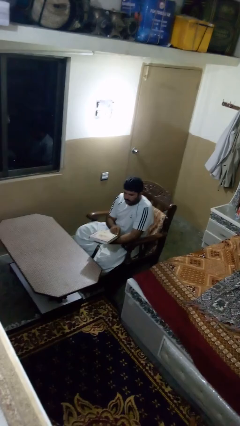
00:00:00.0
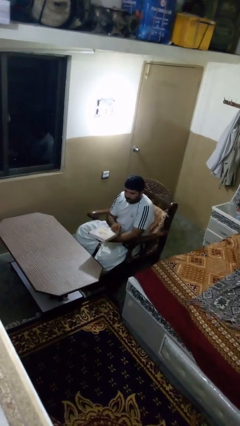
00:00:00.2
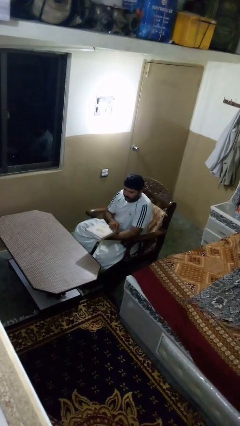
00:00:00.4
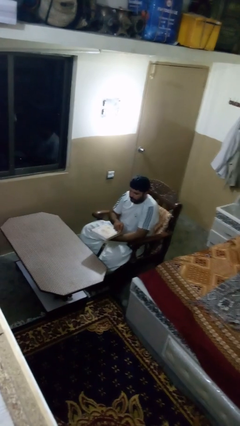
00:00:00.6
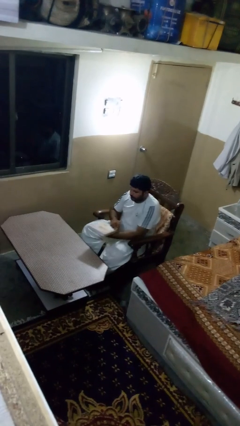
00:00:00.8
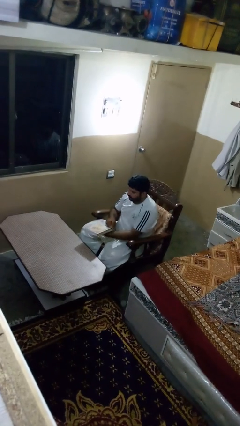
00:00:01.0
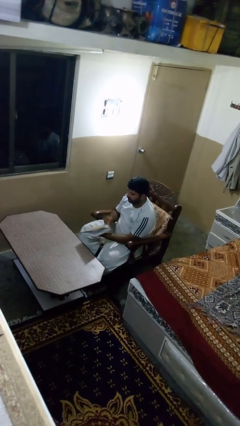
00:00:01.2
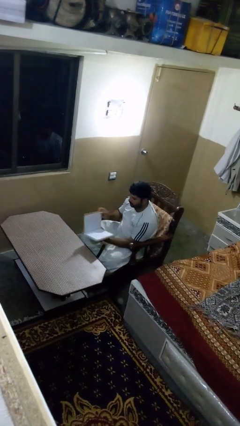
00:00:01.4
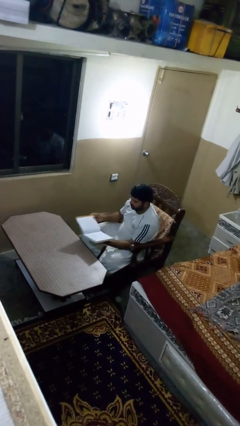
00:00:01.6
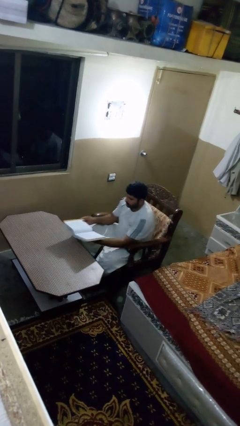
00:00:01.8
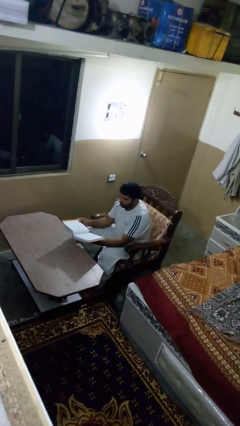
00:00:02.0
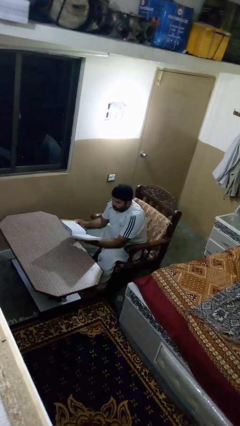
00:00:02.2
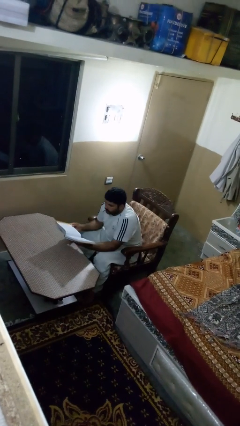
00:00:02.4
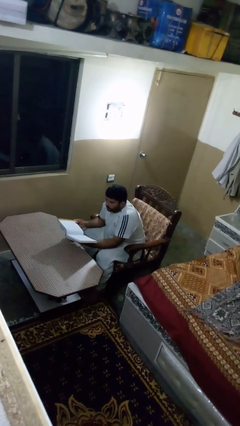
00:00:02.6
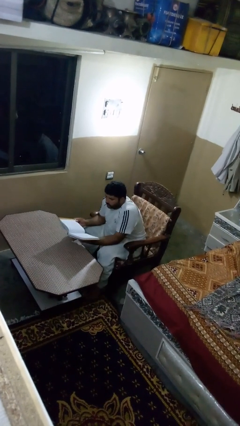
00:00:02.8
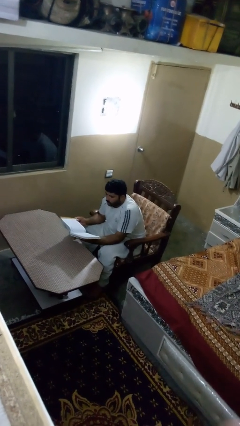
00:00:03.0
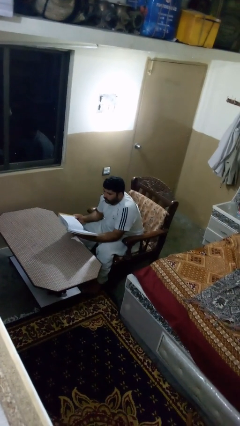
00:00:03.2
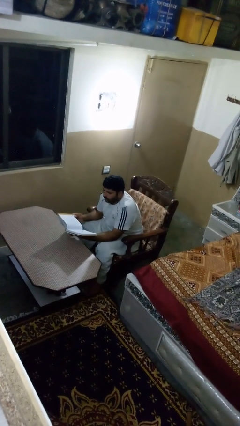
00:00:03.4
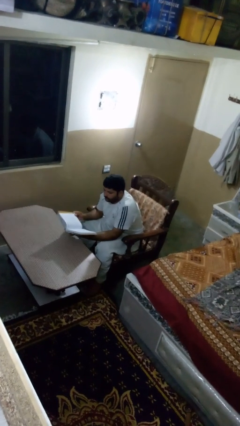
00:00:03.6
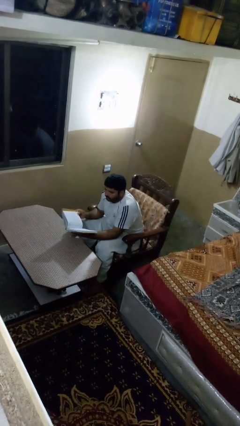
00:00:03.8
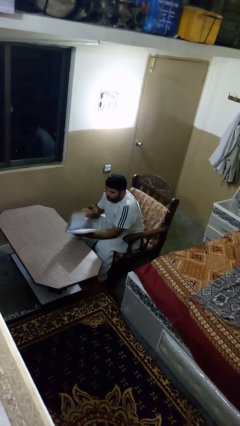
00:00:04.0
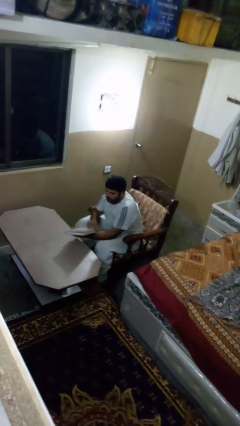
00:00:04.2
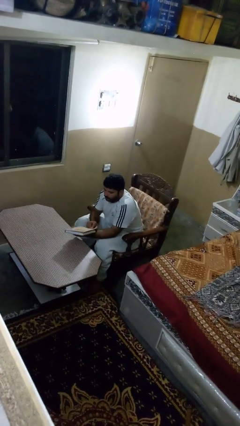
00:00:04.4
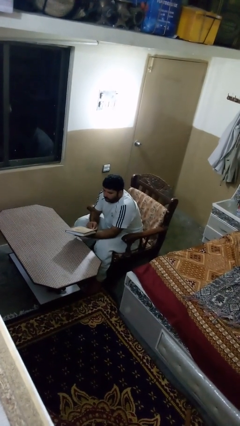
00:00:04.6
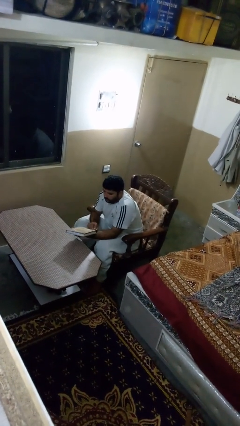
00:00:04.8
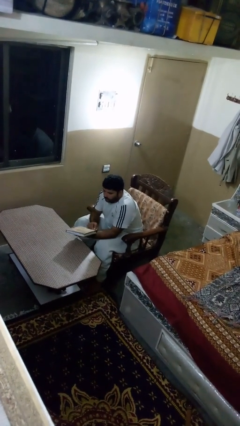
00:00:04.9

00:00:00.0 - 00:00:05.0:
person reads book

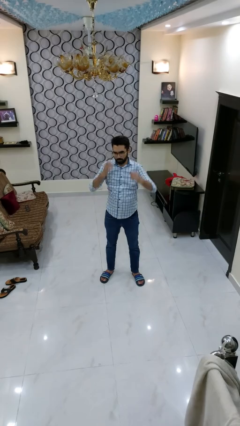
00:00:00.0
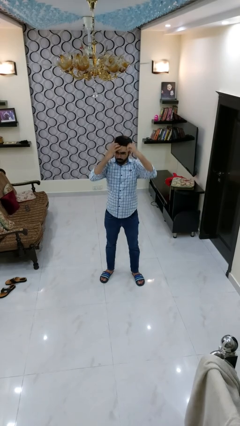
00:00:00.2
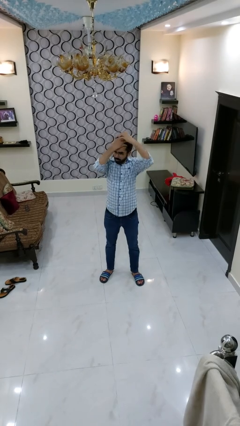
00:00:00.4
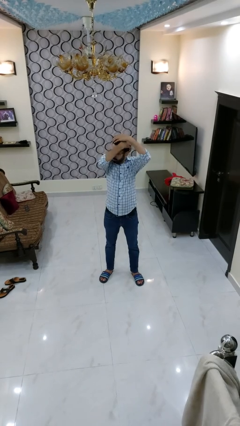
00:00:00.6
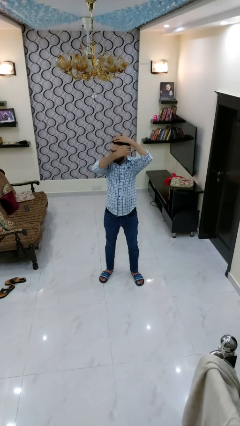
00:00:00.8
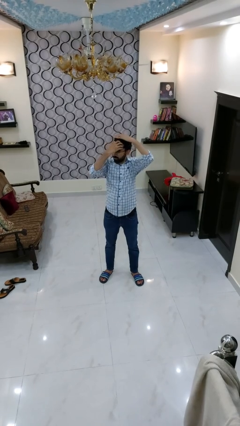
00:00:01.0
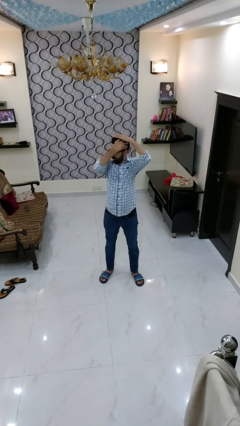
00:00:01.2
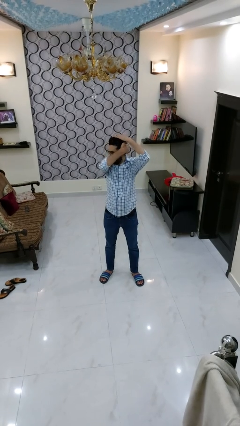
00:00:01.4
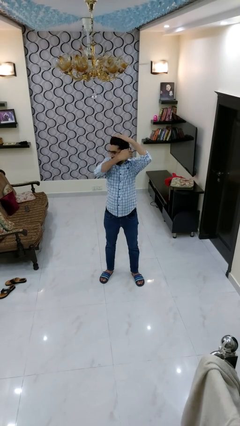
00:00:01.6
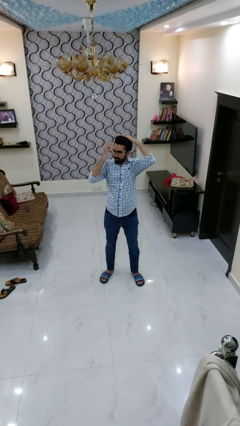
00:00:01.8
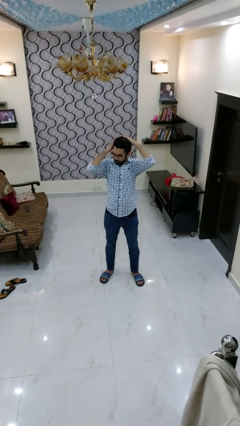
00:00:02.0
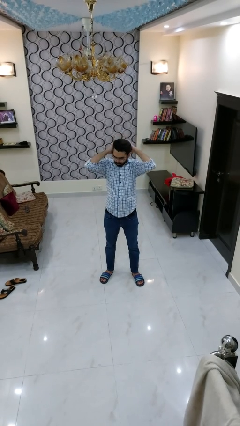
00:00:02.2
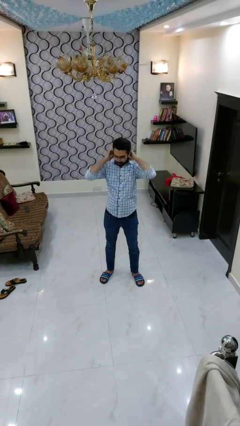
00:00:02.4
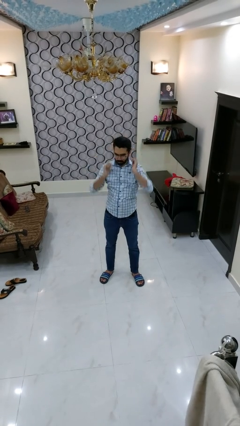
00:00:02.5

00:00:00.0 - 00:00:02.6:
person strokes hair

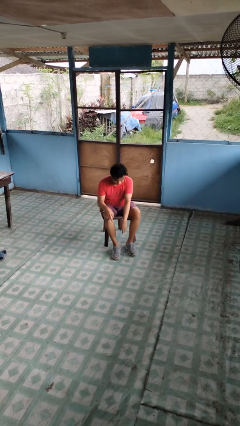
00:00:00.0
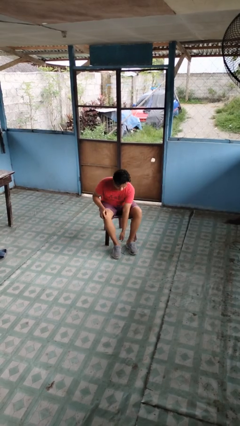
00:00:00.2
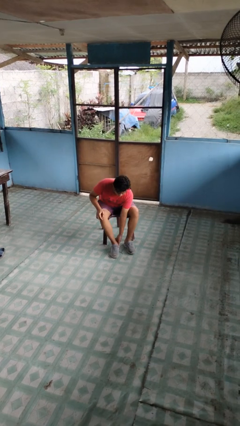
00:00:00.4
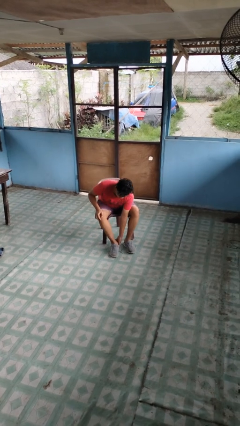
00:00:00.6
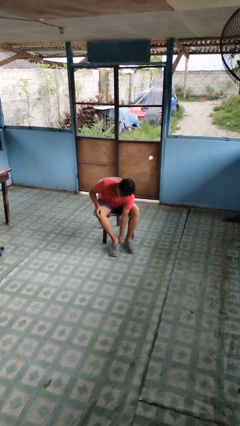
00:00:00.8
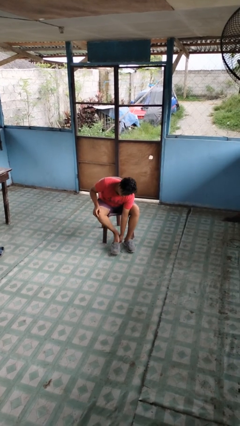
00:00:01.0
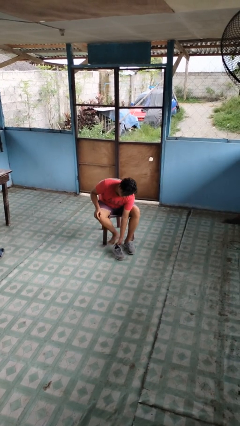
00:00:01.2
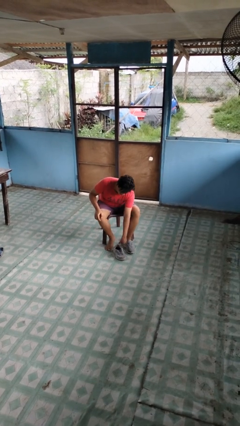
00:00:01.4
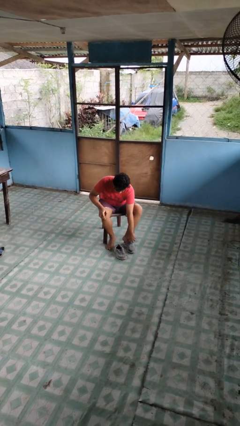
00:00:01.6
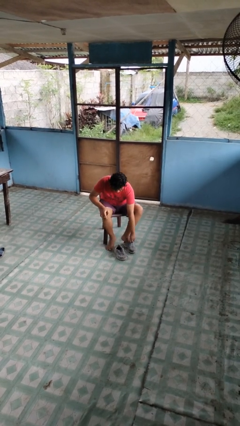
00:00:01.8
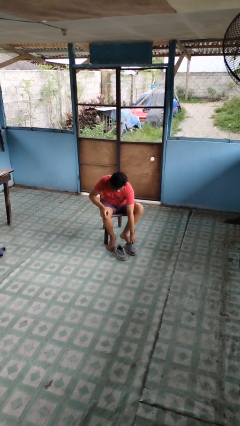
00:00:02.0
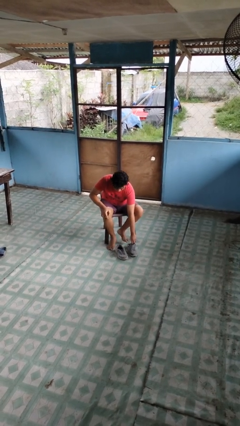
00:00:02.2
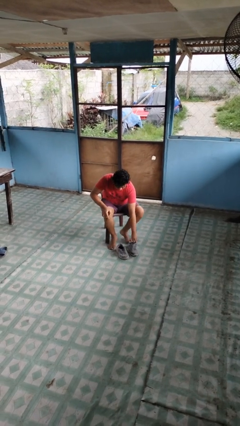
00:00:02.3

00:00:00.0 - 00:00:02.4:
person takes off shoes

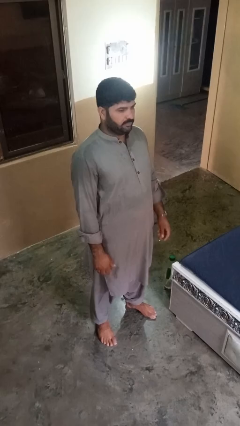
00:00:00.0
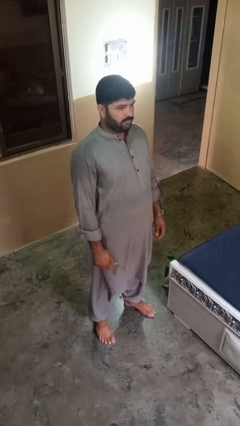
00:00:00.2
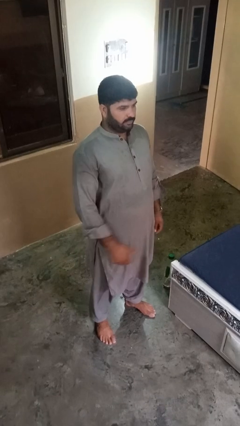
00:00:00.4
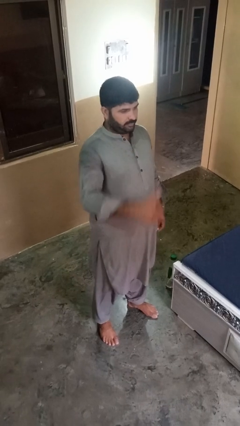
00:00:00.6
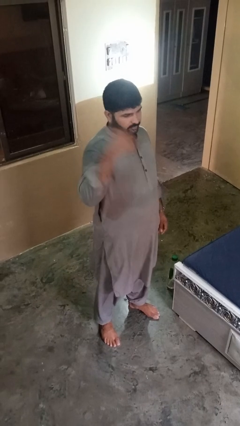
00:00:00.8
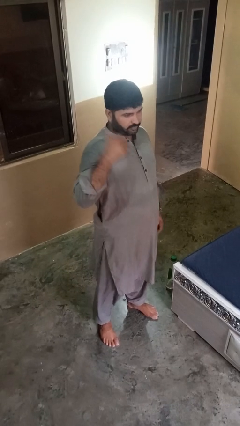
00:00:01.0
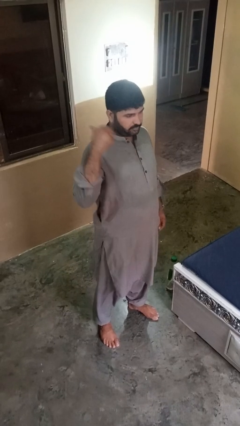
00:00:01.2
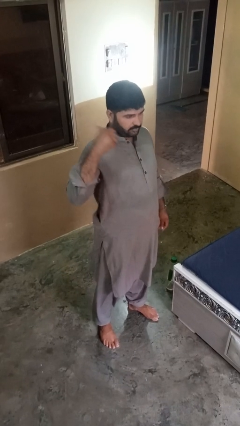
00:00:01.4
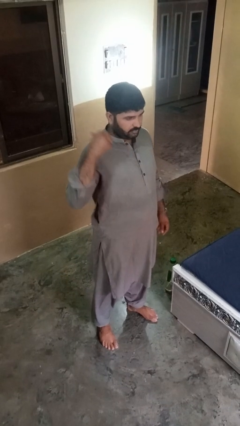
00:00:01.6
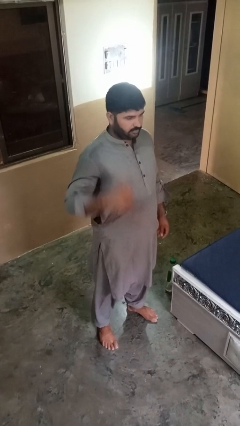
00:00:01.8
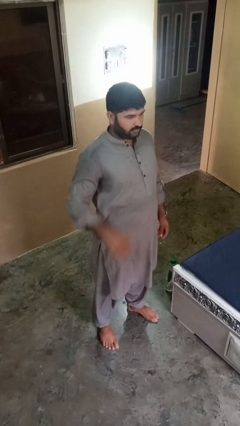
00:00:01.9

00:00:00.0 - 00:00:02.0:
person gestures behind me

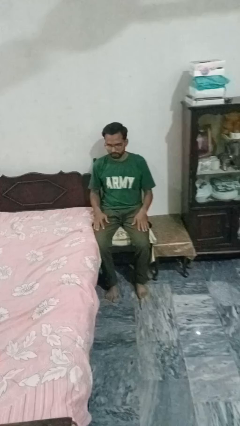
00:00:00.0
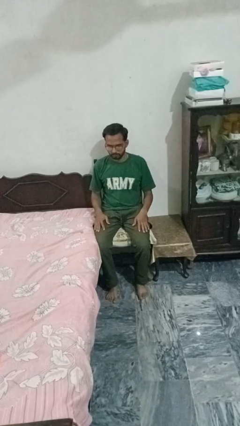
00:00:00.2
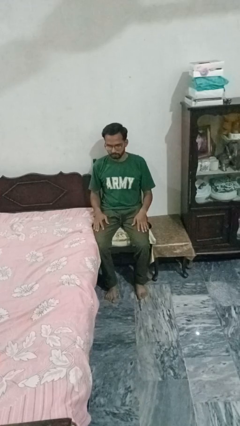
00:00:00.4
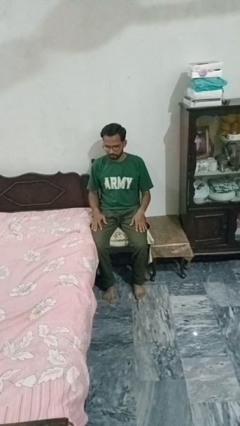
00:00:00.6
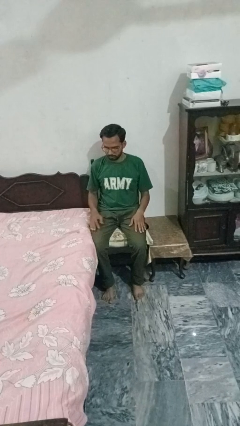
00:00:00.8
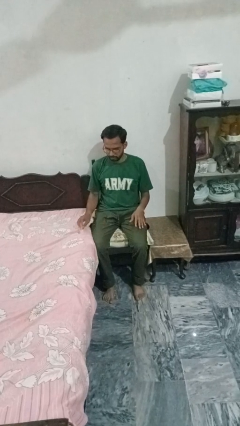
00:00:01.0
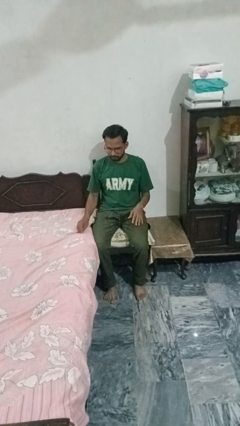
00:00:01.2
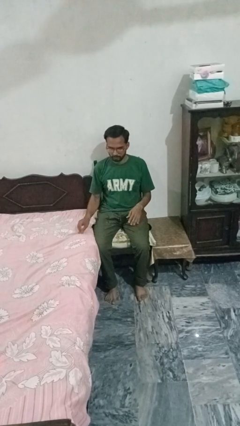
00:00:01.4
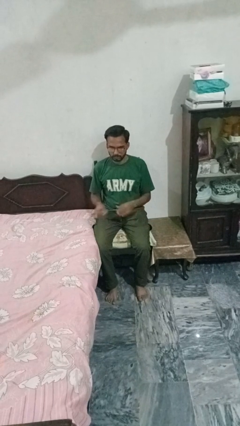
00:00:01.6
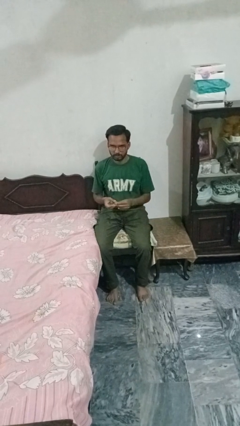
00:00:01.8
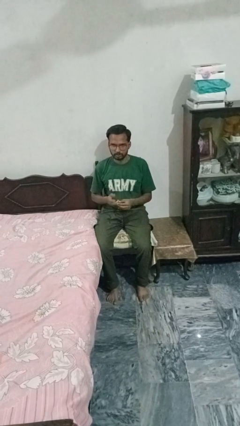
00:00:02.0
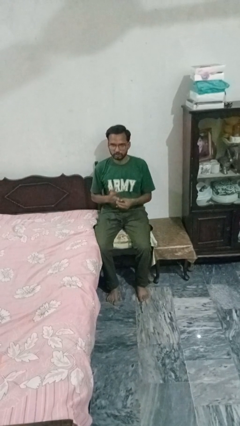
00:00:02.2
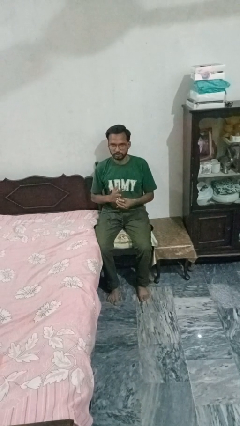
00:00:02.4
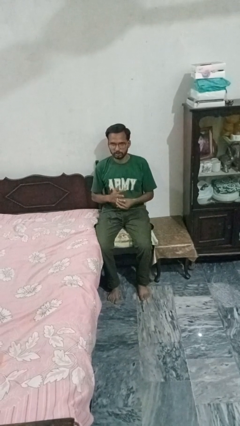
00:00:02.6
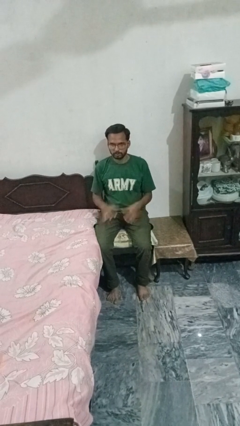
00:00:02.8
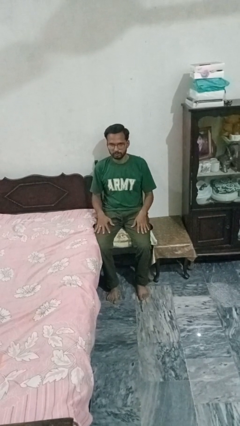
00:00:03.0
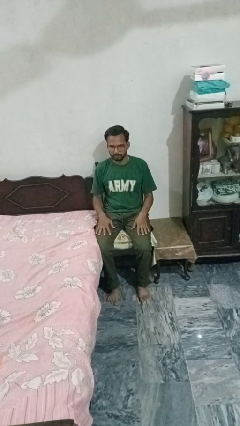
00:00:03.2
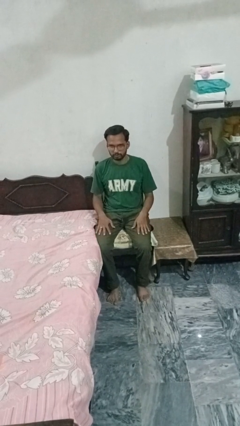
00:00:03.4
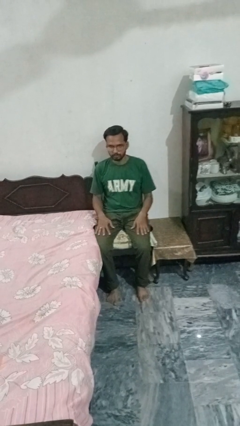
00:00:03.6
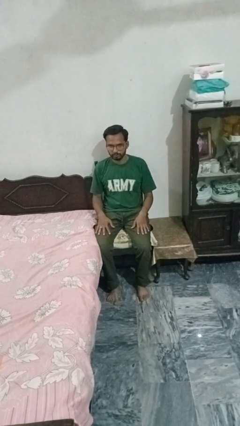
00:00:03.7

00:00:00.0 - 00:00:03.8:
person puts on ring

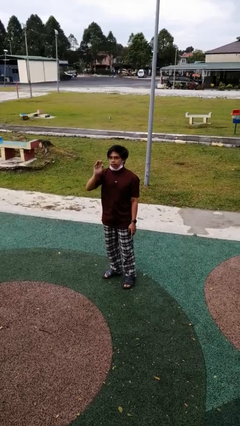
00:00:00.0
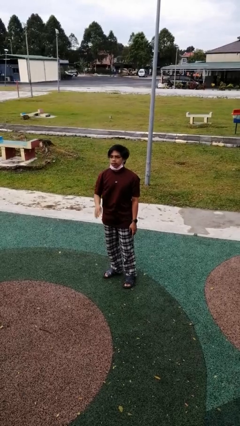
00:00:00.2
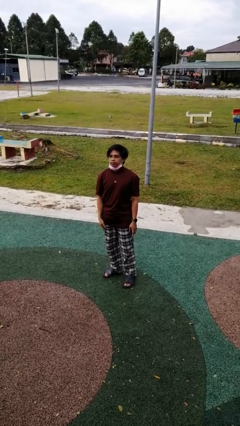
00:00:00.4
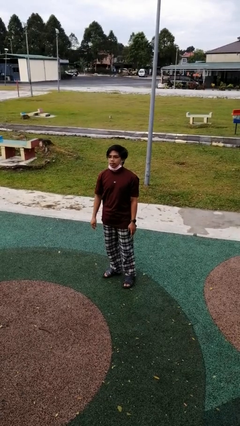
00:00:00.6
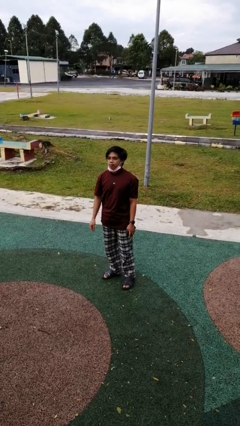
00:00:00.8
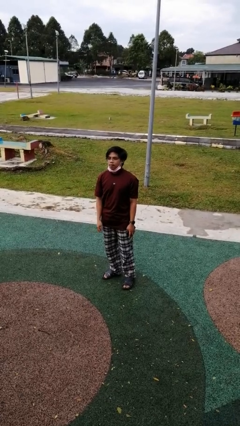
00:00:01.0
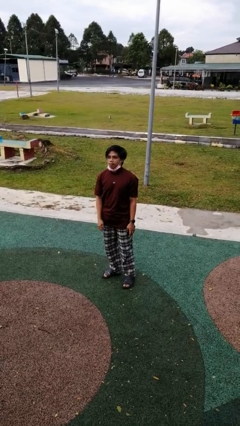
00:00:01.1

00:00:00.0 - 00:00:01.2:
person gestures lower hand

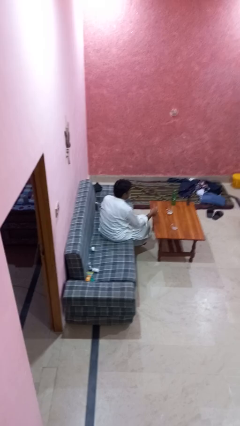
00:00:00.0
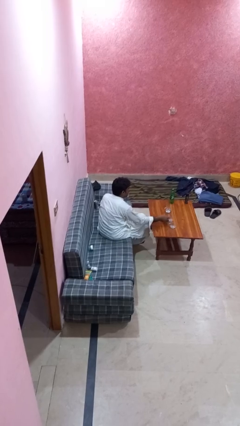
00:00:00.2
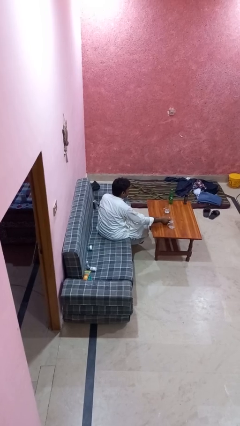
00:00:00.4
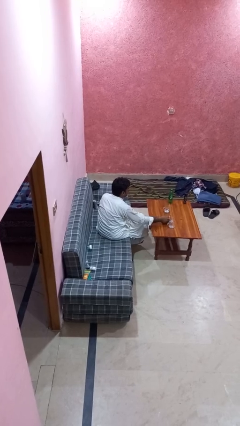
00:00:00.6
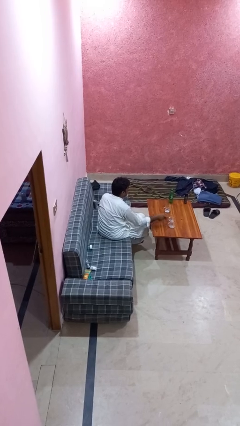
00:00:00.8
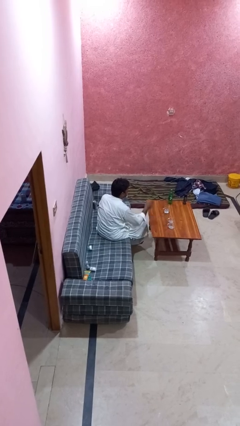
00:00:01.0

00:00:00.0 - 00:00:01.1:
person puts down object on table
